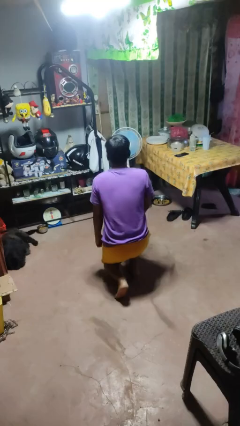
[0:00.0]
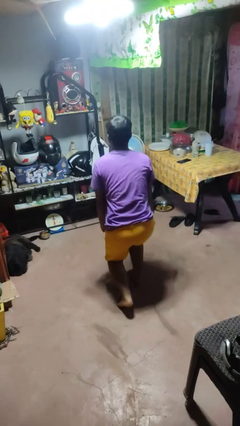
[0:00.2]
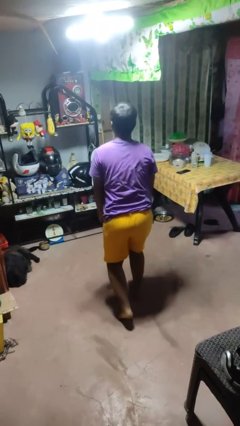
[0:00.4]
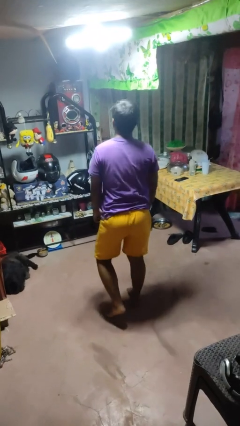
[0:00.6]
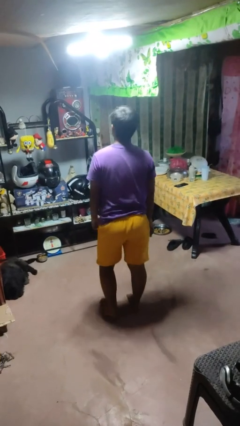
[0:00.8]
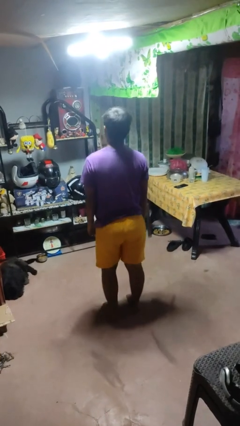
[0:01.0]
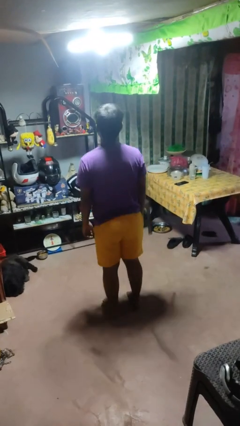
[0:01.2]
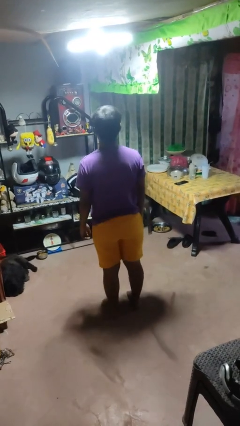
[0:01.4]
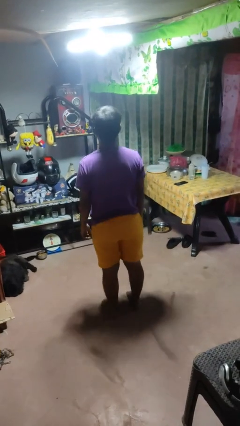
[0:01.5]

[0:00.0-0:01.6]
person stands up from floor

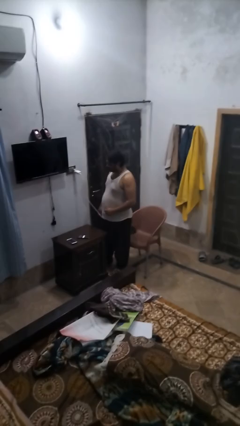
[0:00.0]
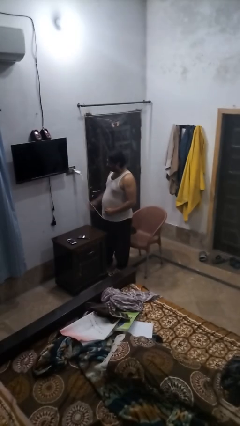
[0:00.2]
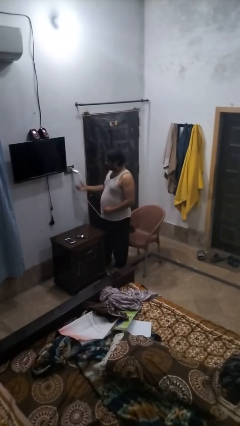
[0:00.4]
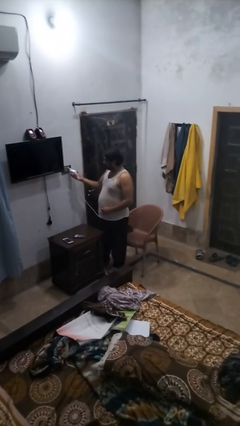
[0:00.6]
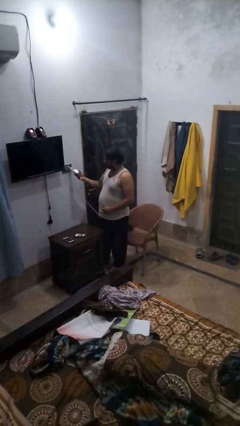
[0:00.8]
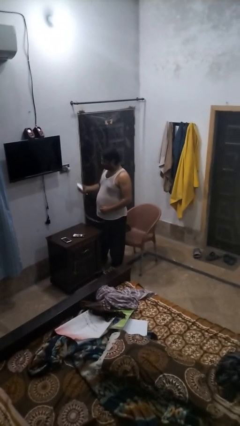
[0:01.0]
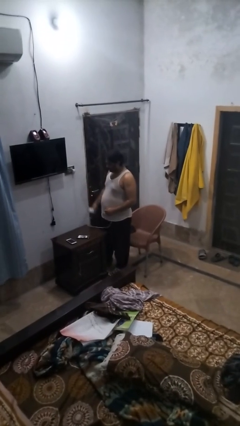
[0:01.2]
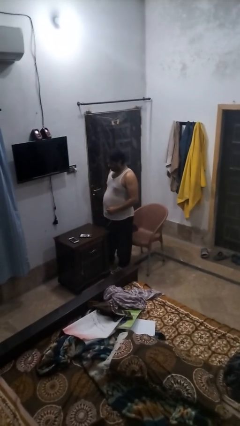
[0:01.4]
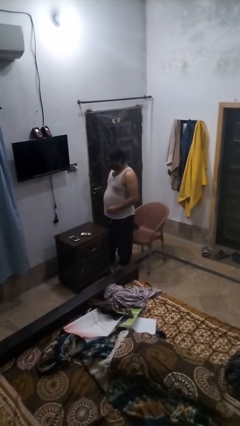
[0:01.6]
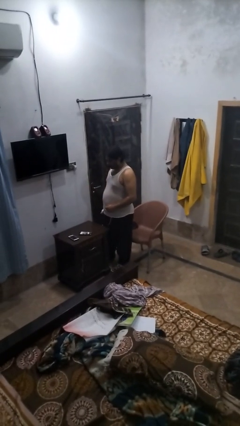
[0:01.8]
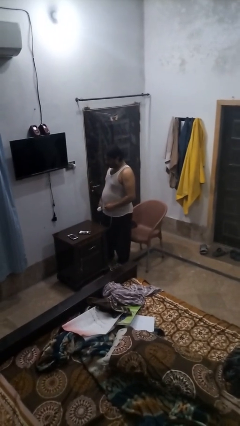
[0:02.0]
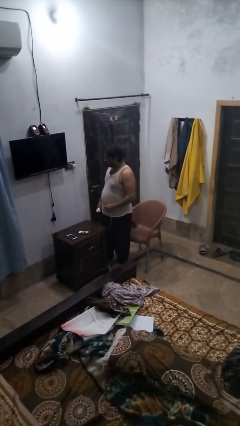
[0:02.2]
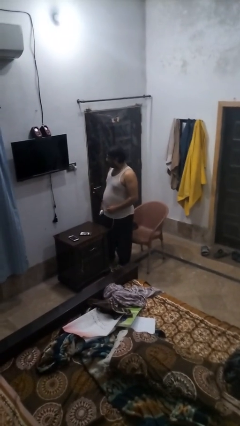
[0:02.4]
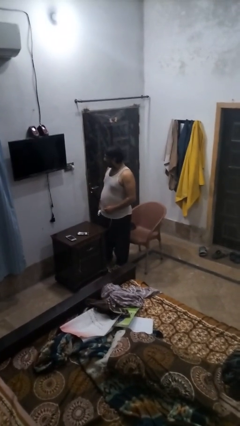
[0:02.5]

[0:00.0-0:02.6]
person unplugs from electrical socket

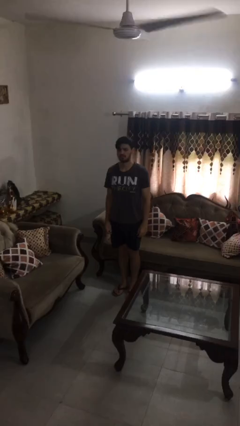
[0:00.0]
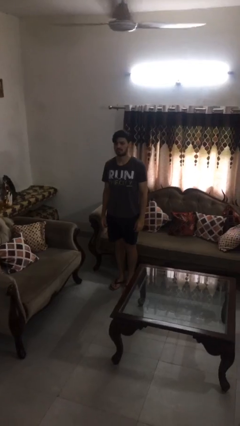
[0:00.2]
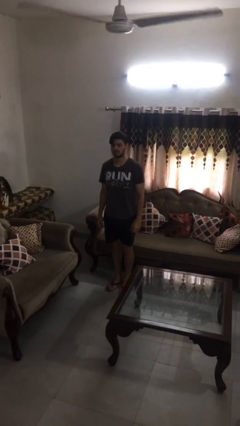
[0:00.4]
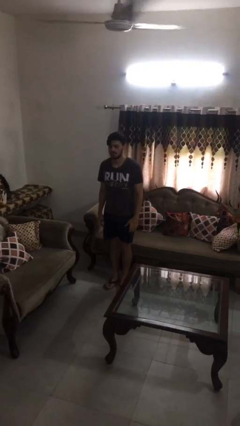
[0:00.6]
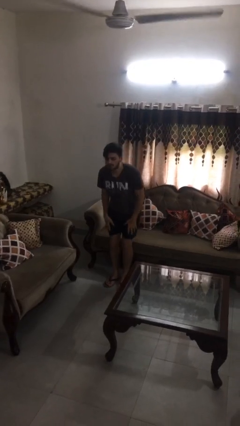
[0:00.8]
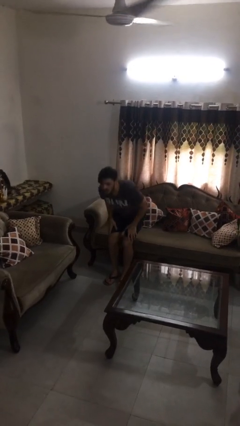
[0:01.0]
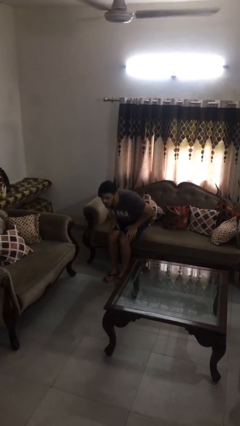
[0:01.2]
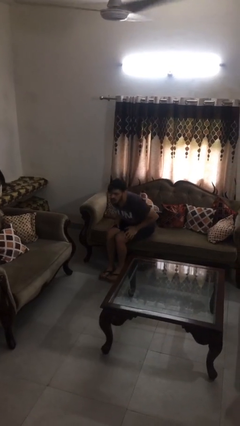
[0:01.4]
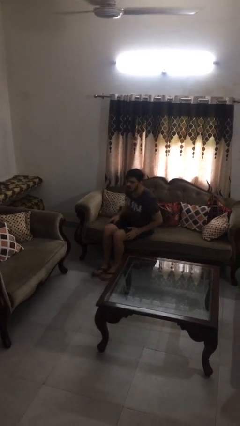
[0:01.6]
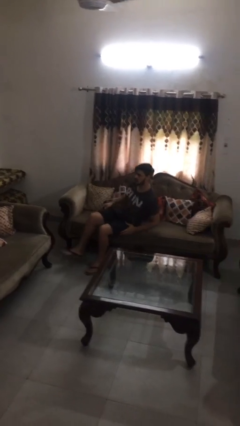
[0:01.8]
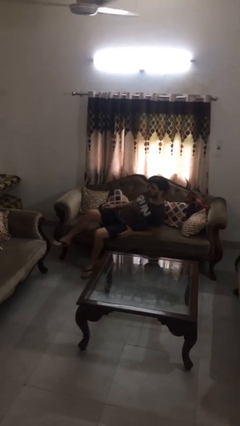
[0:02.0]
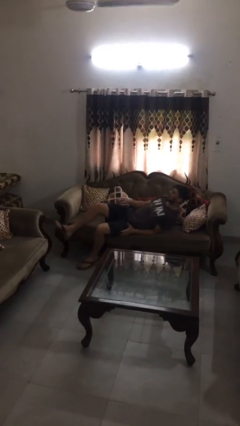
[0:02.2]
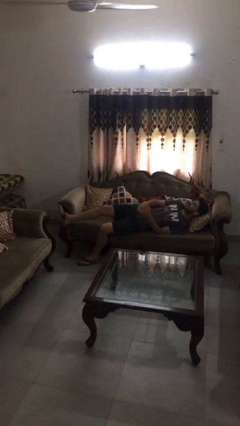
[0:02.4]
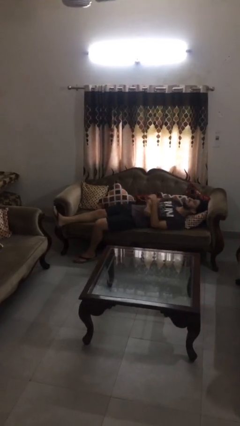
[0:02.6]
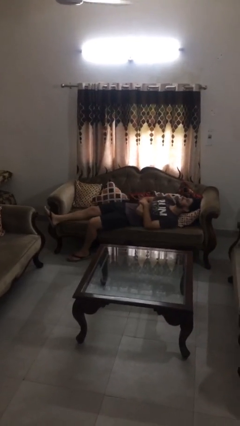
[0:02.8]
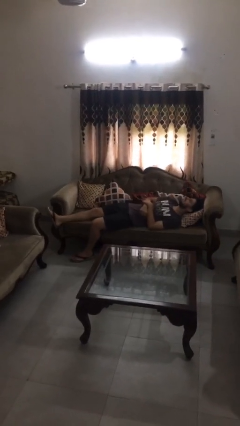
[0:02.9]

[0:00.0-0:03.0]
person lies down on couch

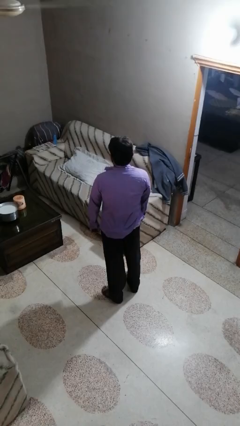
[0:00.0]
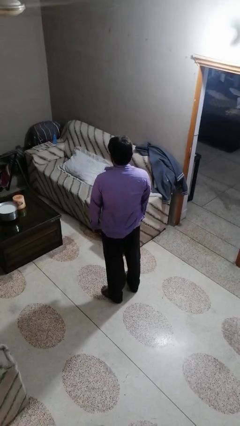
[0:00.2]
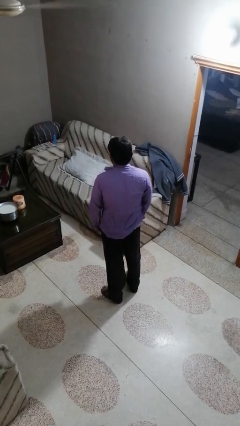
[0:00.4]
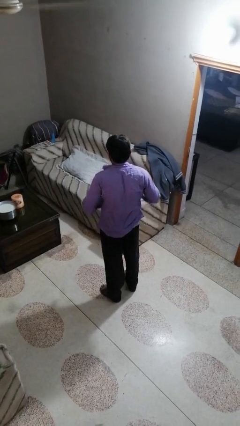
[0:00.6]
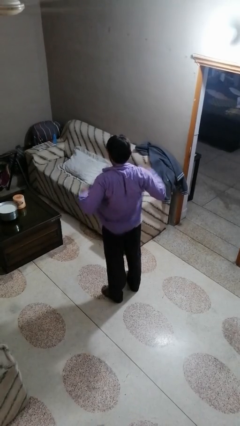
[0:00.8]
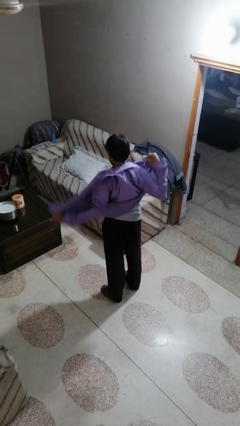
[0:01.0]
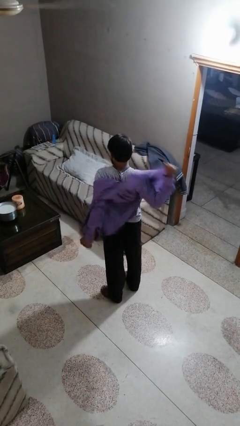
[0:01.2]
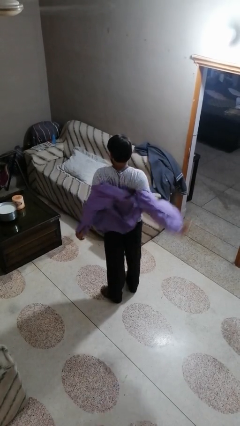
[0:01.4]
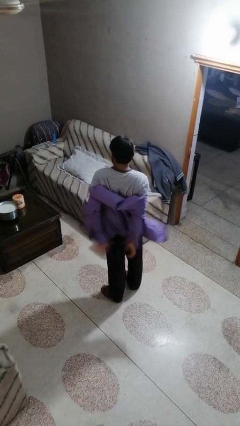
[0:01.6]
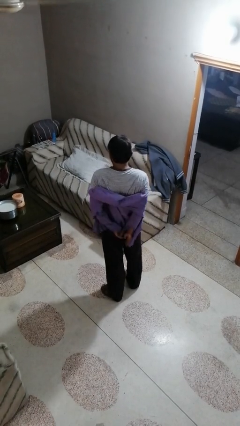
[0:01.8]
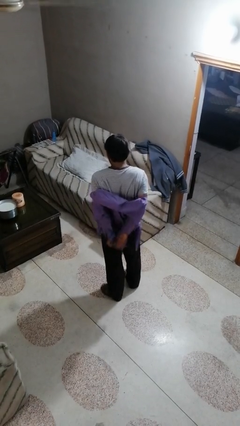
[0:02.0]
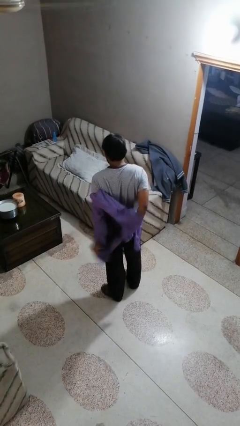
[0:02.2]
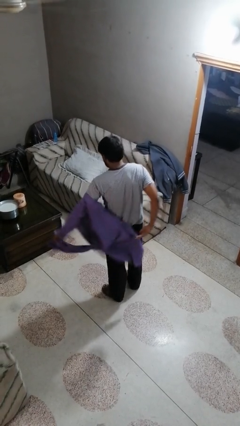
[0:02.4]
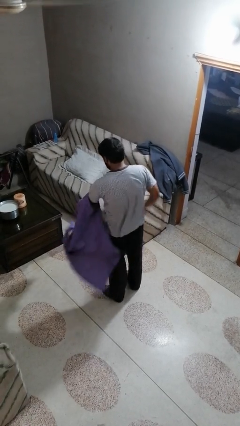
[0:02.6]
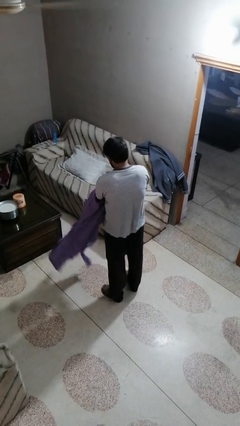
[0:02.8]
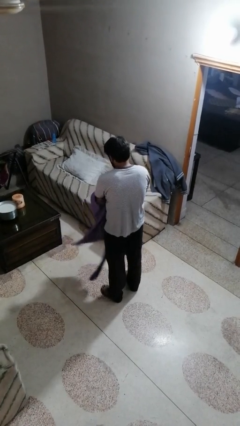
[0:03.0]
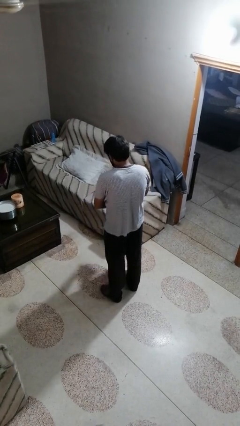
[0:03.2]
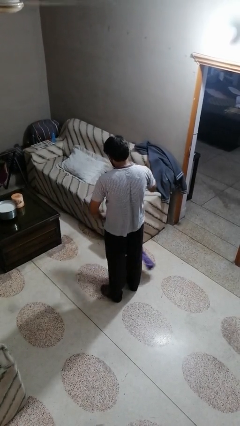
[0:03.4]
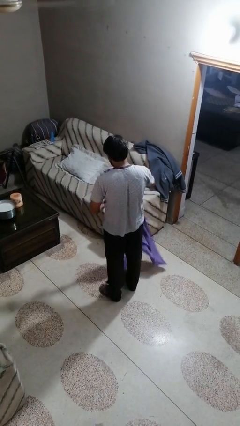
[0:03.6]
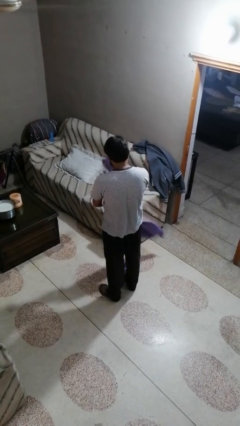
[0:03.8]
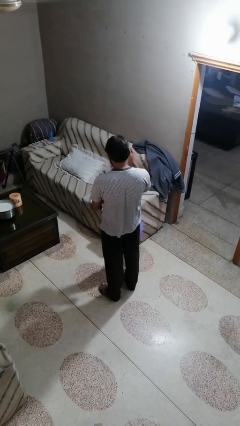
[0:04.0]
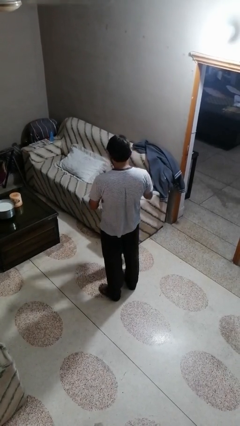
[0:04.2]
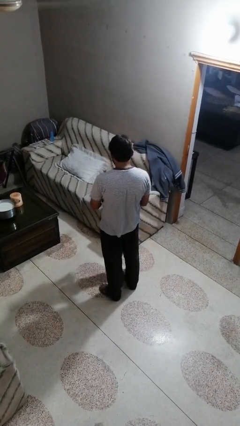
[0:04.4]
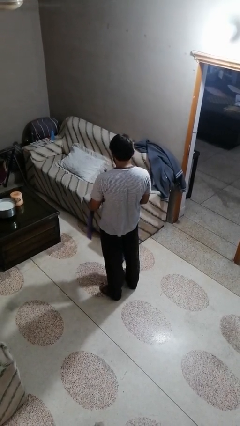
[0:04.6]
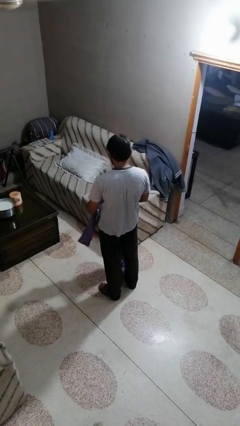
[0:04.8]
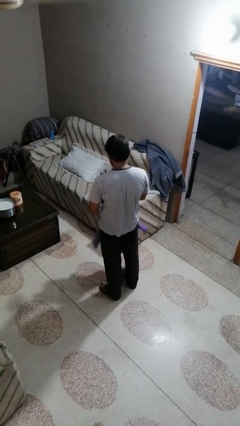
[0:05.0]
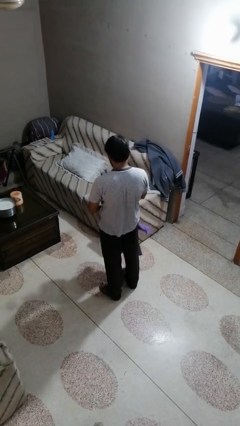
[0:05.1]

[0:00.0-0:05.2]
person takes off shirt

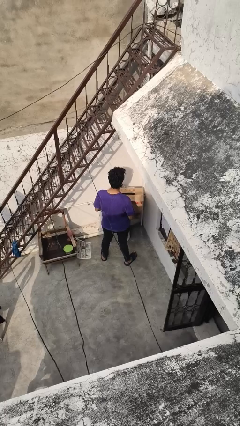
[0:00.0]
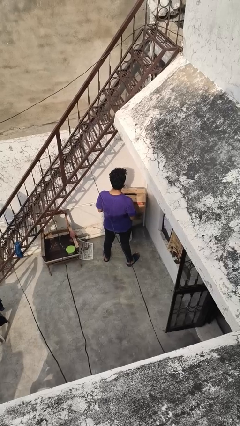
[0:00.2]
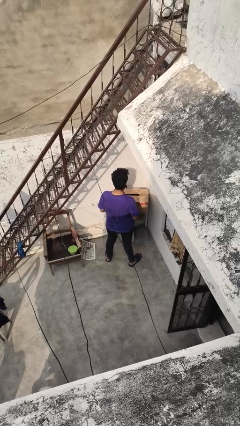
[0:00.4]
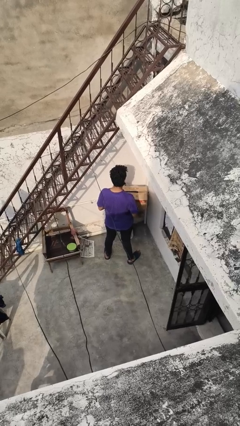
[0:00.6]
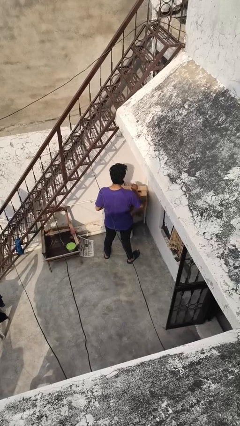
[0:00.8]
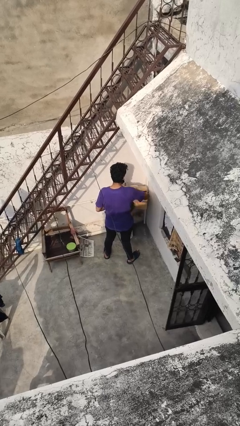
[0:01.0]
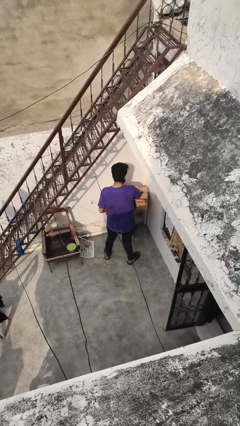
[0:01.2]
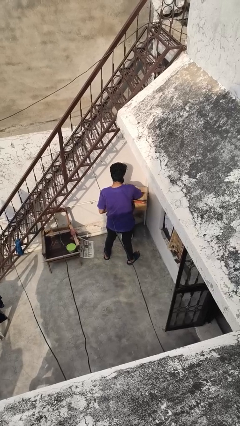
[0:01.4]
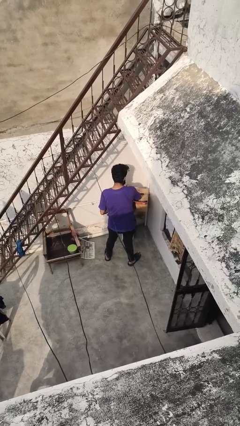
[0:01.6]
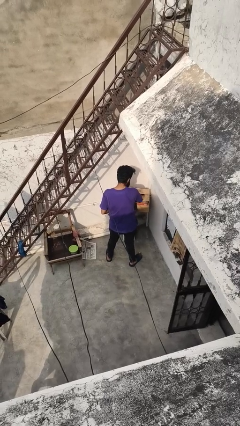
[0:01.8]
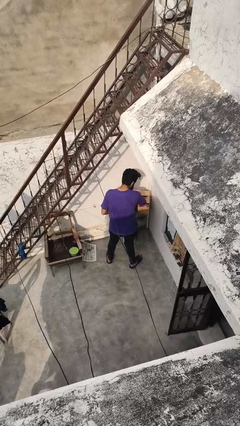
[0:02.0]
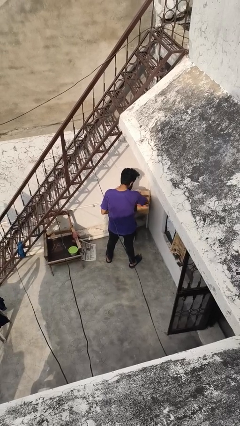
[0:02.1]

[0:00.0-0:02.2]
person searches in box

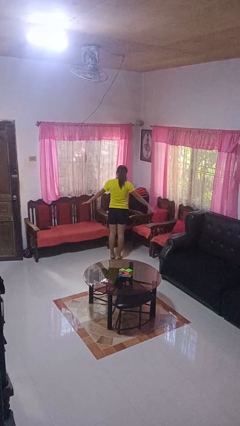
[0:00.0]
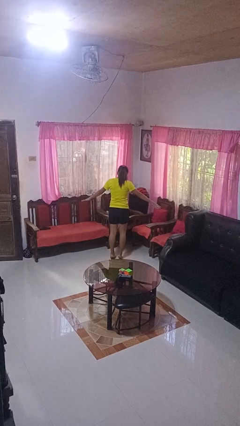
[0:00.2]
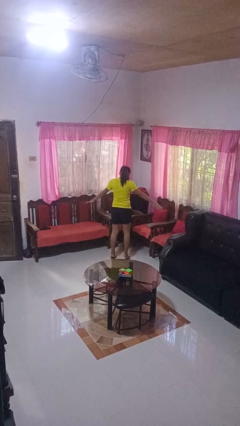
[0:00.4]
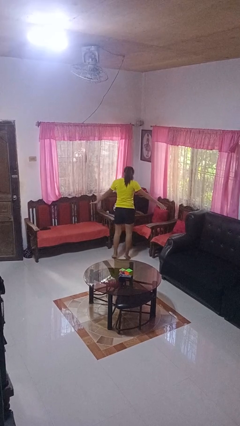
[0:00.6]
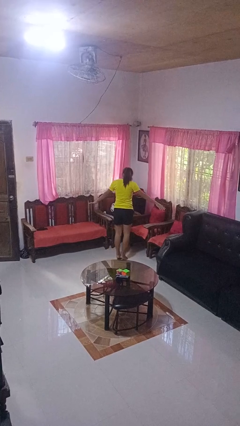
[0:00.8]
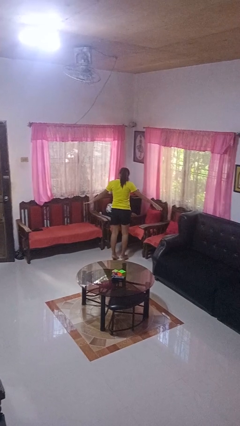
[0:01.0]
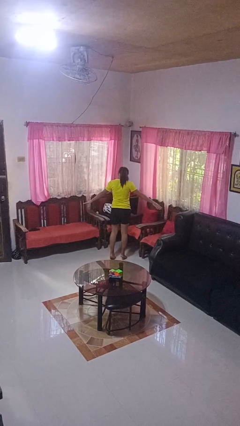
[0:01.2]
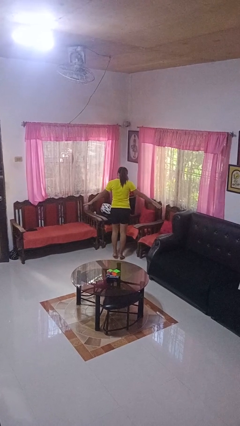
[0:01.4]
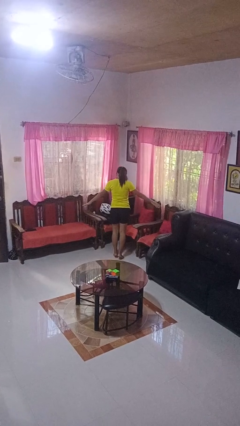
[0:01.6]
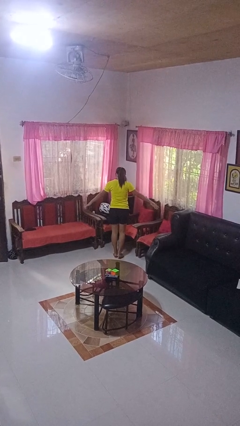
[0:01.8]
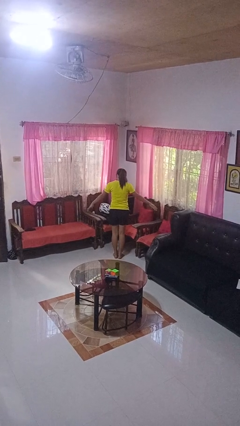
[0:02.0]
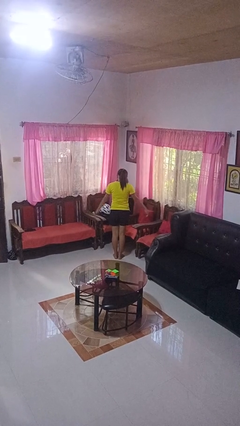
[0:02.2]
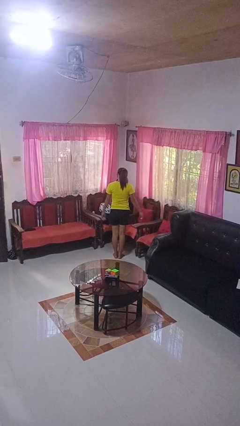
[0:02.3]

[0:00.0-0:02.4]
person walks tiptoe
